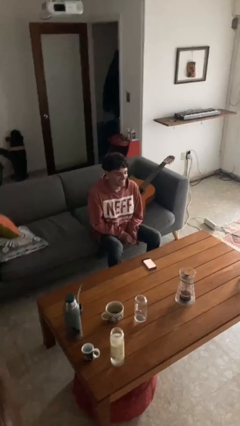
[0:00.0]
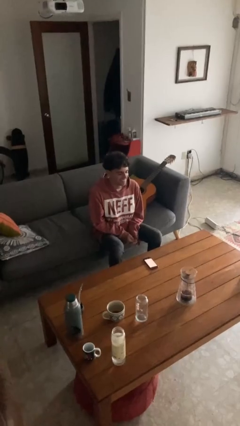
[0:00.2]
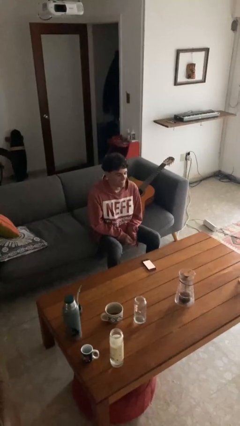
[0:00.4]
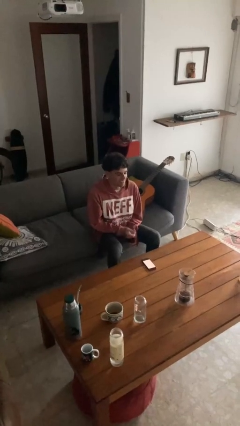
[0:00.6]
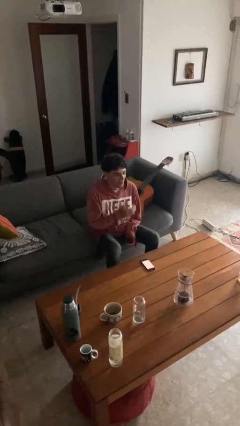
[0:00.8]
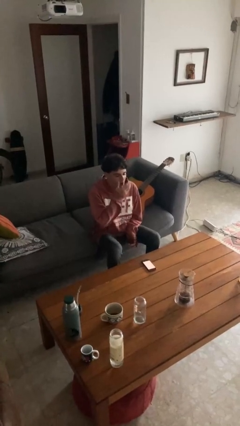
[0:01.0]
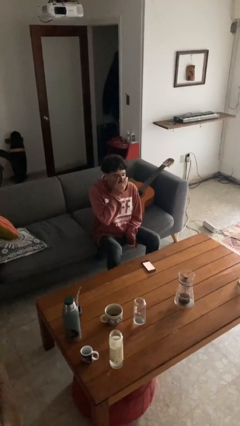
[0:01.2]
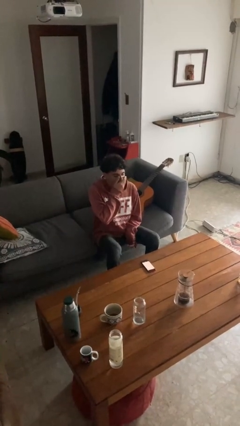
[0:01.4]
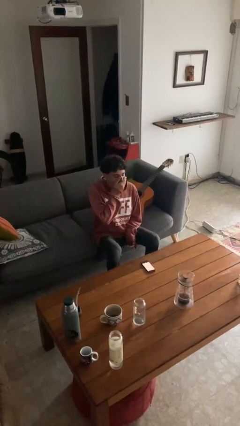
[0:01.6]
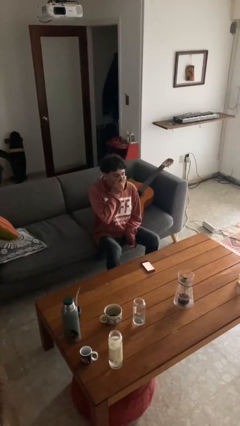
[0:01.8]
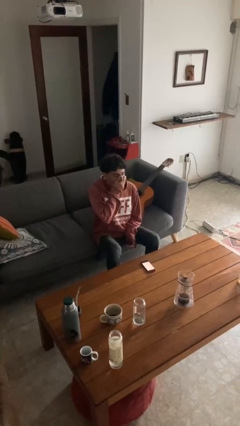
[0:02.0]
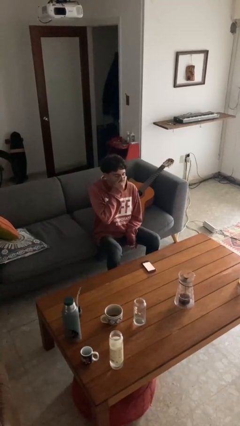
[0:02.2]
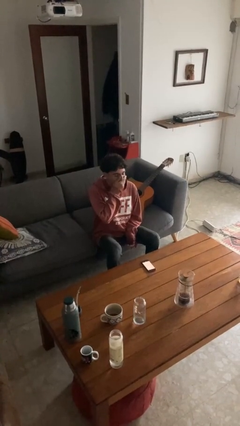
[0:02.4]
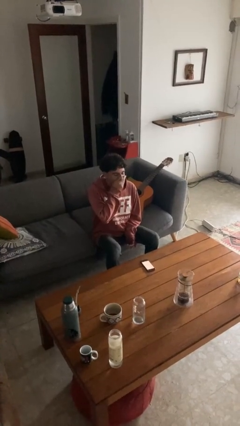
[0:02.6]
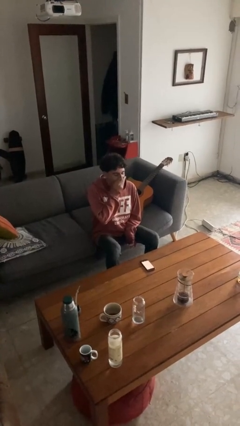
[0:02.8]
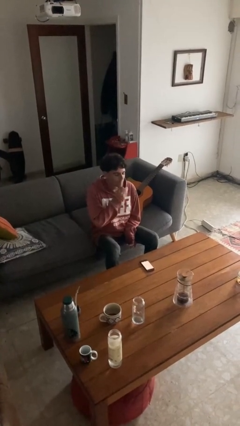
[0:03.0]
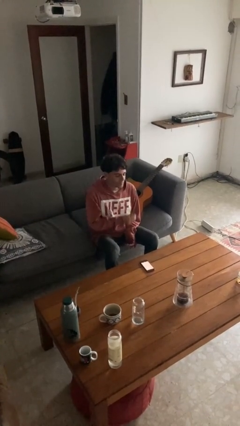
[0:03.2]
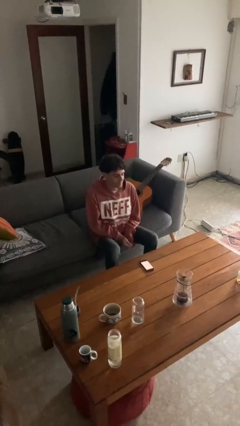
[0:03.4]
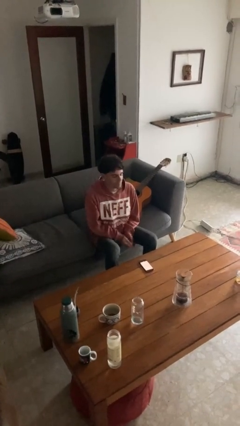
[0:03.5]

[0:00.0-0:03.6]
person yawns

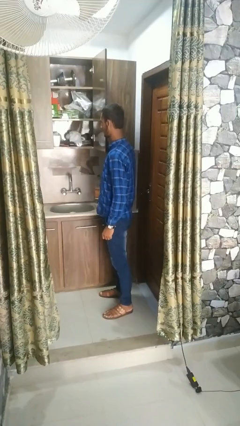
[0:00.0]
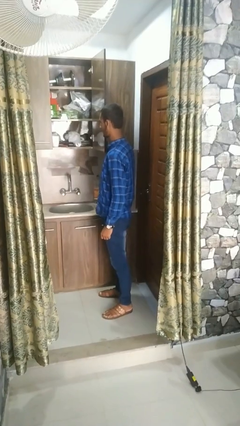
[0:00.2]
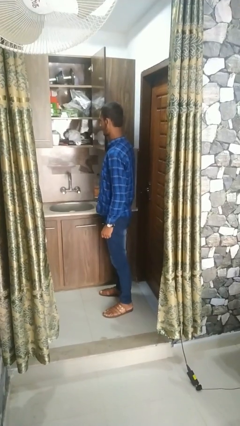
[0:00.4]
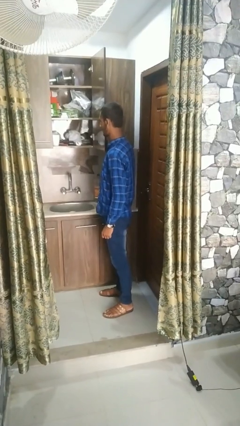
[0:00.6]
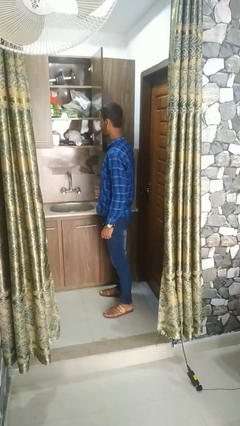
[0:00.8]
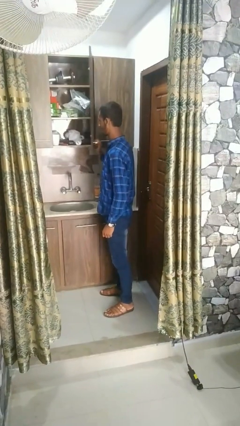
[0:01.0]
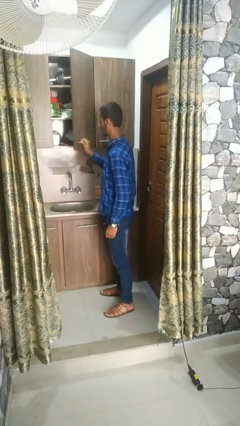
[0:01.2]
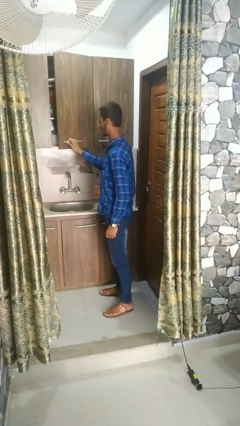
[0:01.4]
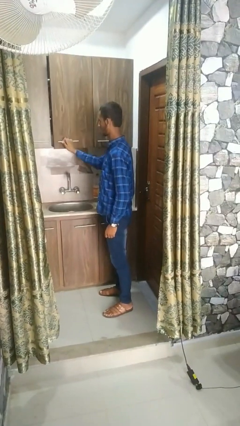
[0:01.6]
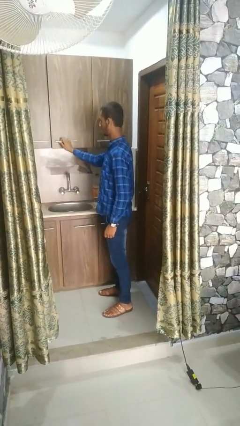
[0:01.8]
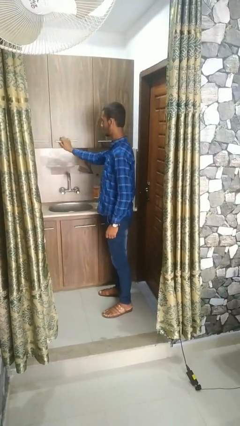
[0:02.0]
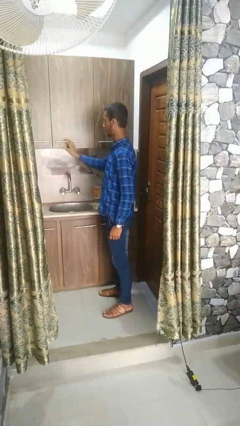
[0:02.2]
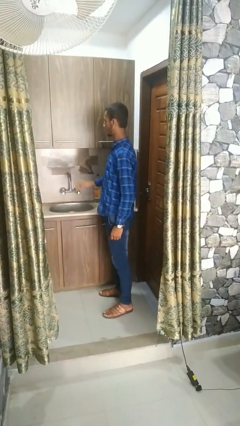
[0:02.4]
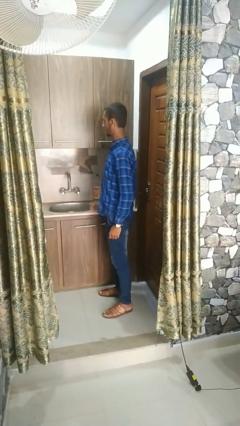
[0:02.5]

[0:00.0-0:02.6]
person closes cabinet

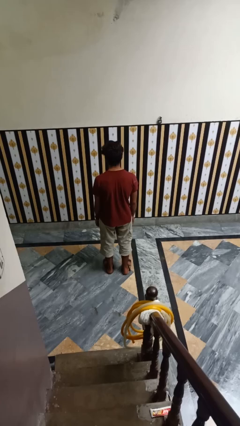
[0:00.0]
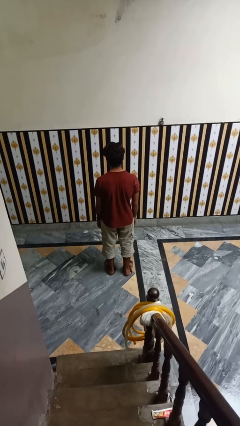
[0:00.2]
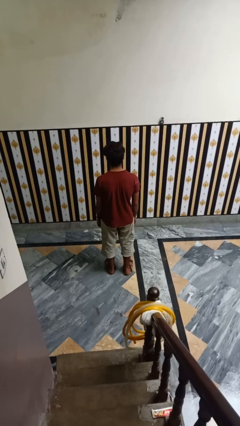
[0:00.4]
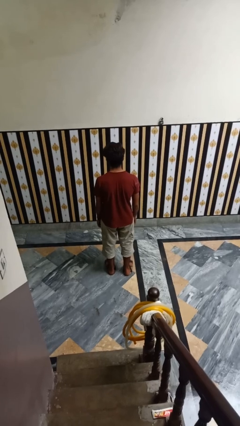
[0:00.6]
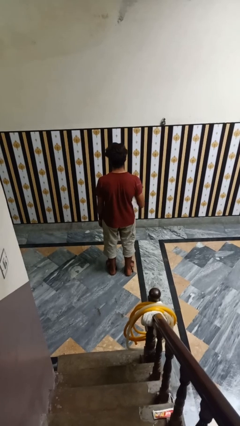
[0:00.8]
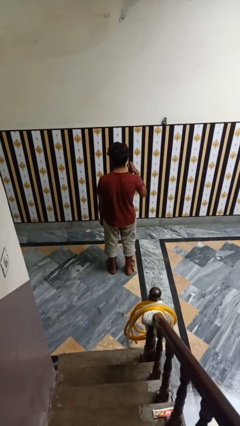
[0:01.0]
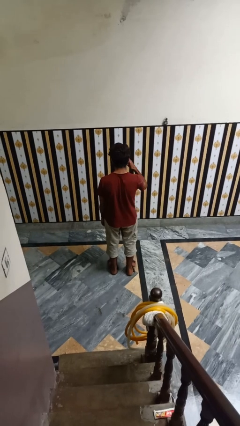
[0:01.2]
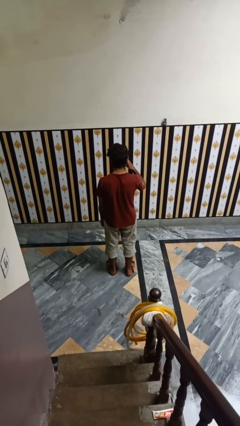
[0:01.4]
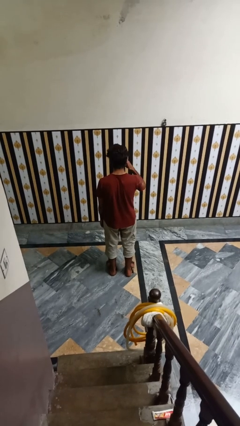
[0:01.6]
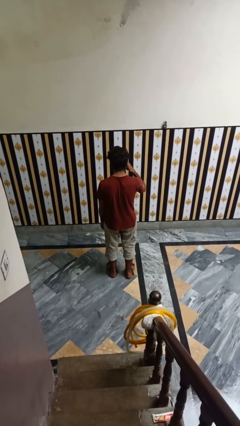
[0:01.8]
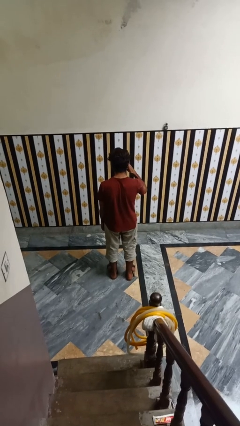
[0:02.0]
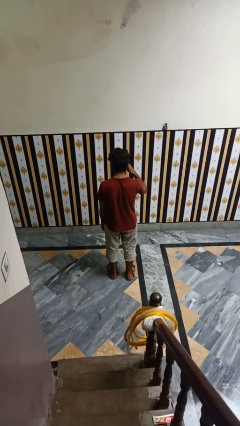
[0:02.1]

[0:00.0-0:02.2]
person gestures call me

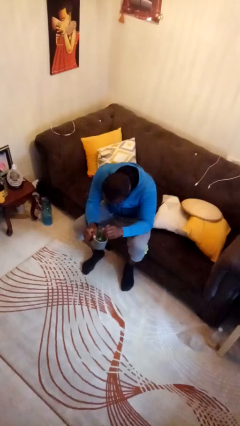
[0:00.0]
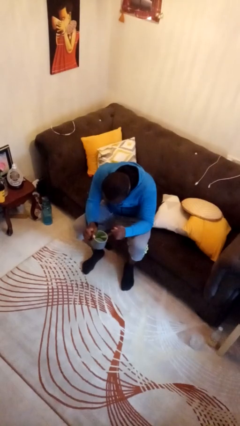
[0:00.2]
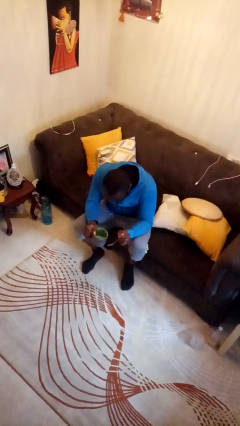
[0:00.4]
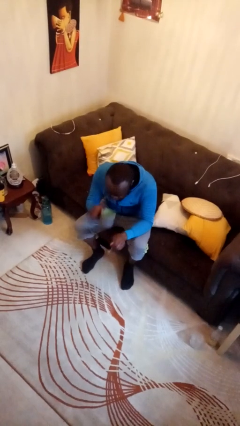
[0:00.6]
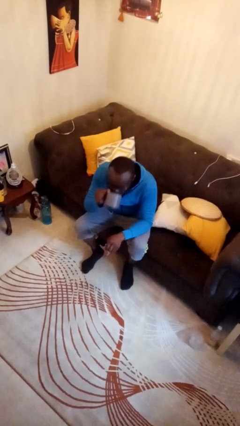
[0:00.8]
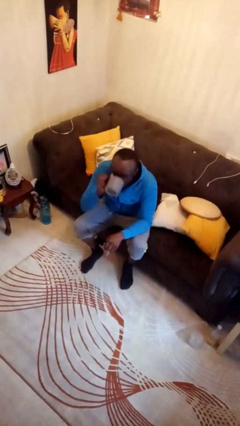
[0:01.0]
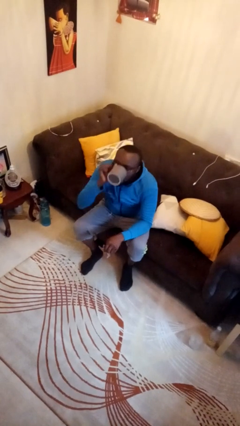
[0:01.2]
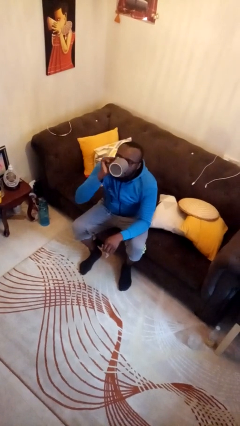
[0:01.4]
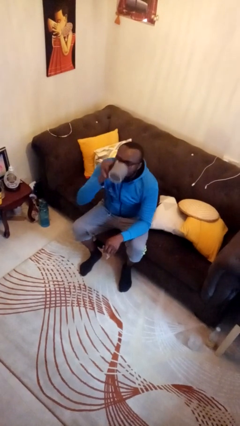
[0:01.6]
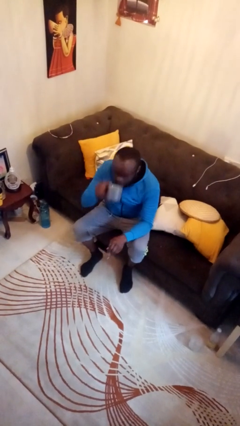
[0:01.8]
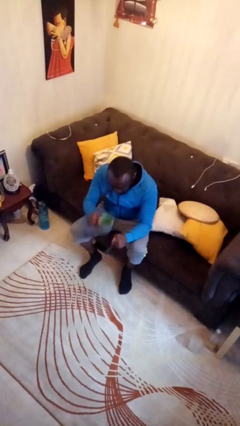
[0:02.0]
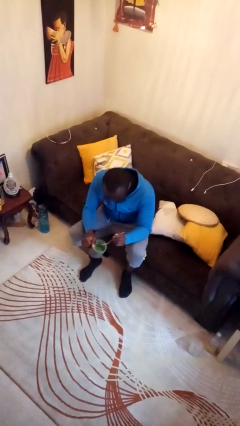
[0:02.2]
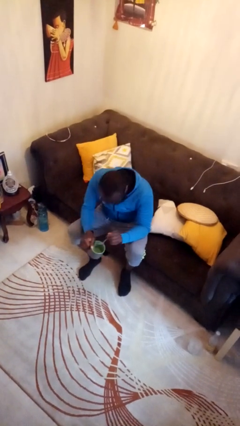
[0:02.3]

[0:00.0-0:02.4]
person drinks from mug

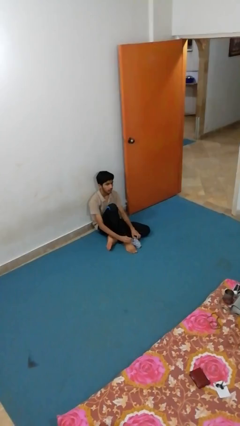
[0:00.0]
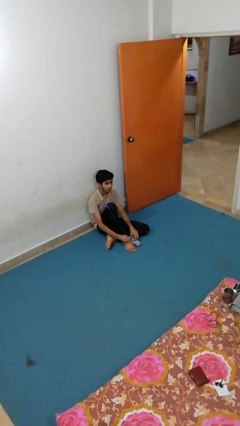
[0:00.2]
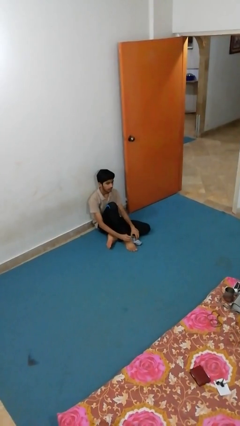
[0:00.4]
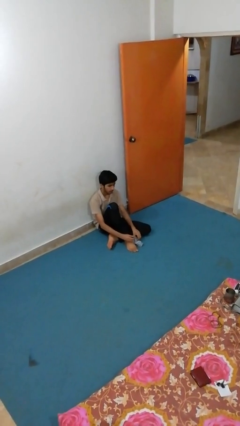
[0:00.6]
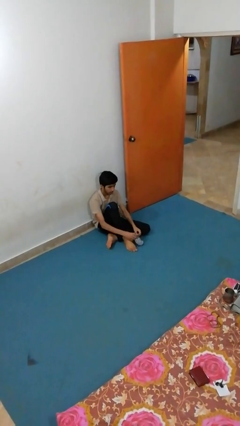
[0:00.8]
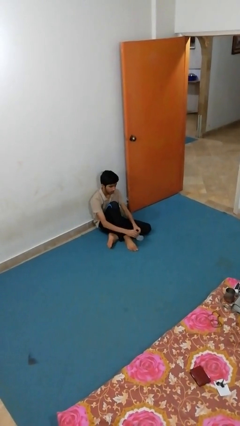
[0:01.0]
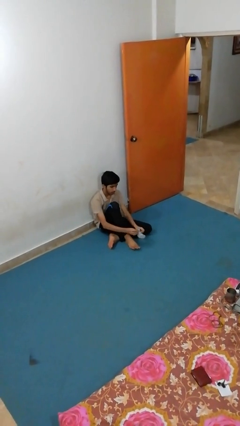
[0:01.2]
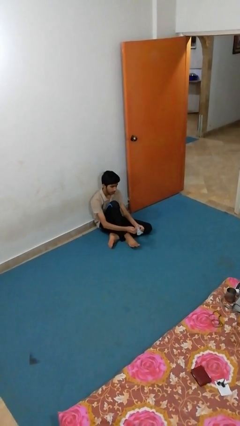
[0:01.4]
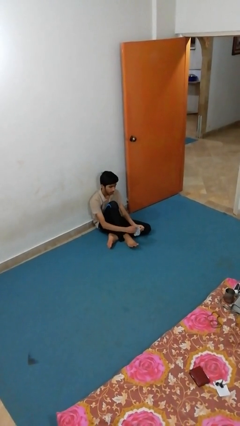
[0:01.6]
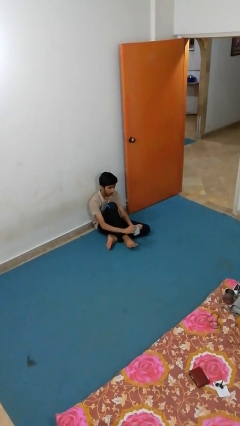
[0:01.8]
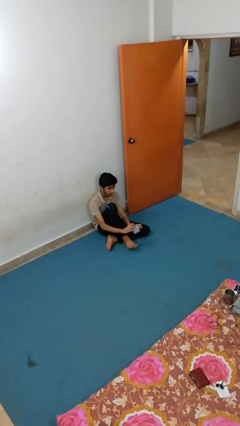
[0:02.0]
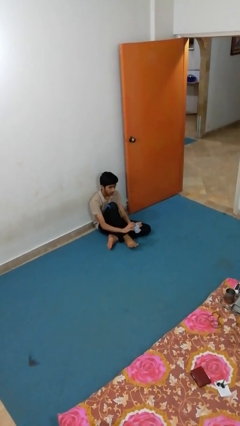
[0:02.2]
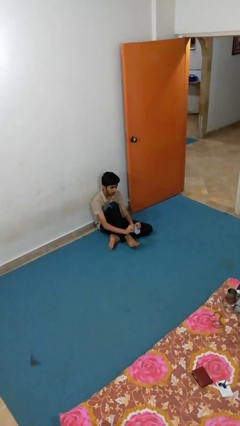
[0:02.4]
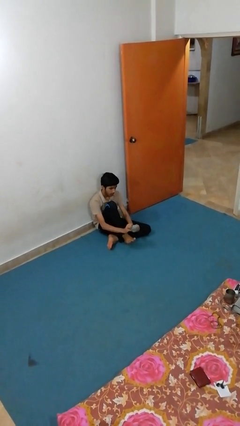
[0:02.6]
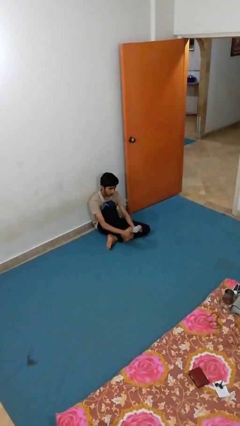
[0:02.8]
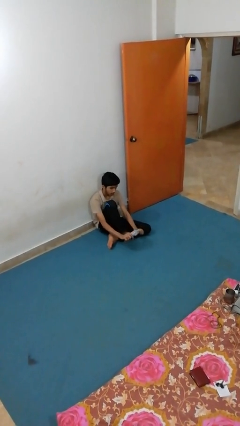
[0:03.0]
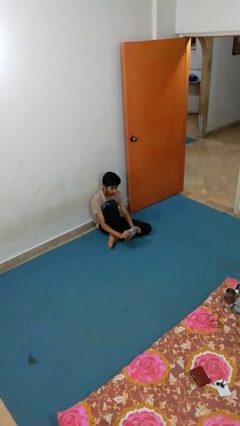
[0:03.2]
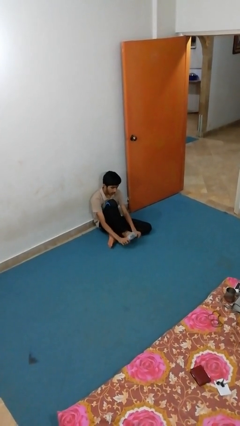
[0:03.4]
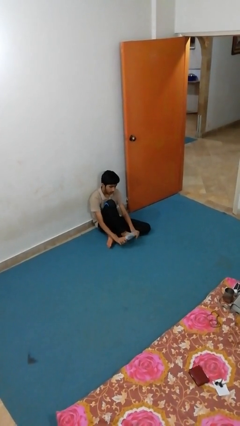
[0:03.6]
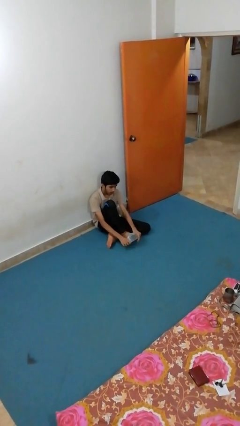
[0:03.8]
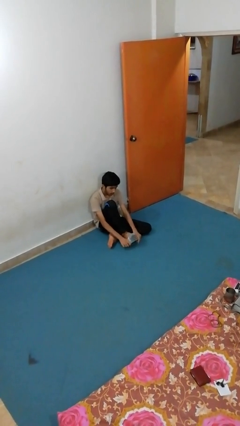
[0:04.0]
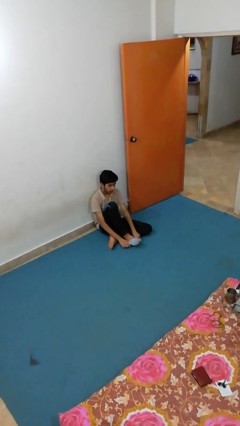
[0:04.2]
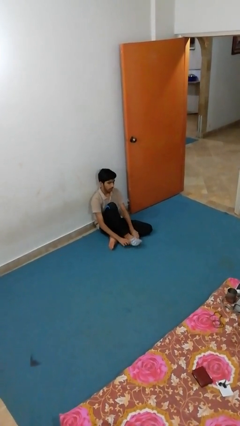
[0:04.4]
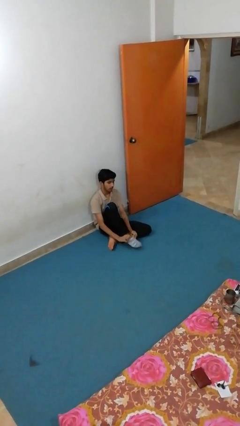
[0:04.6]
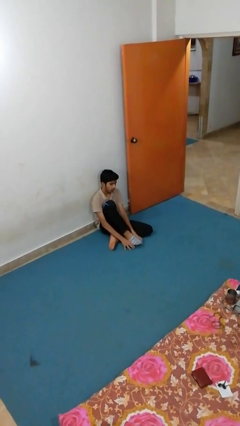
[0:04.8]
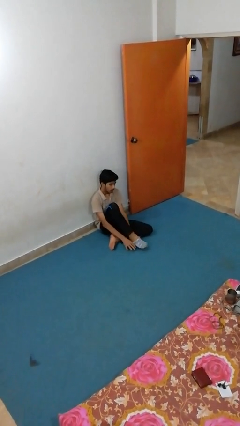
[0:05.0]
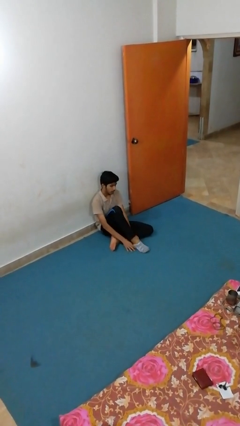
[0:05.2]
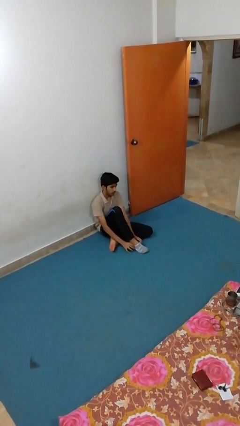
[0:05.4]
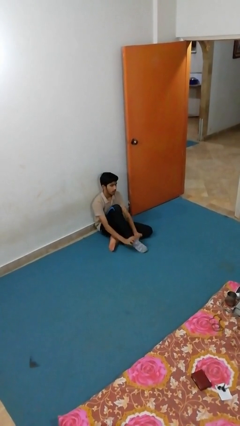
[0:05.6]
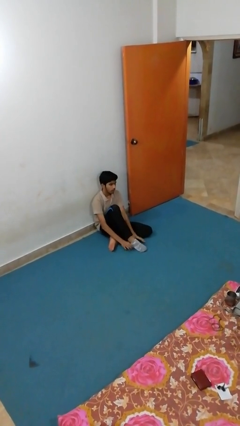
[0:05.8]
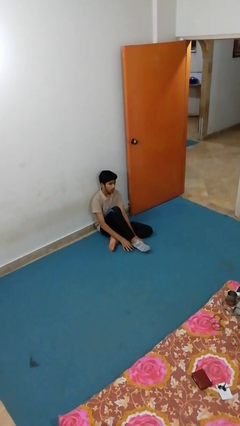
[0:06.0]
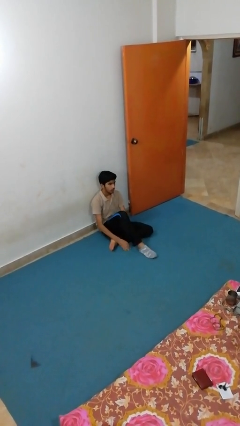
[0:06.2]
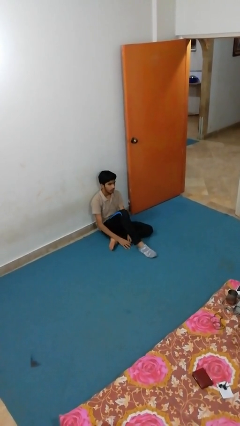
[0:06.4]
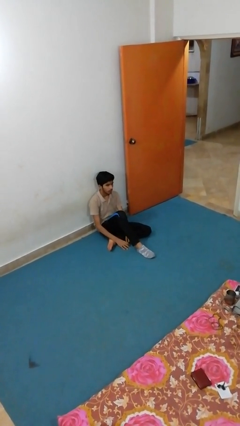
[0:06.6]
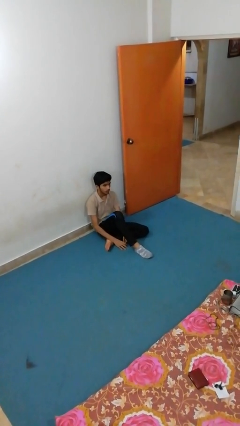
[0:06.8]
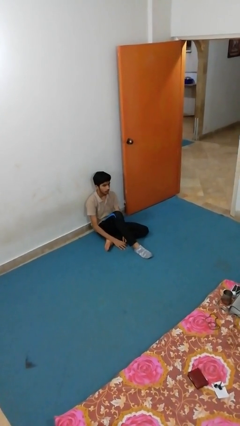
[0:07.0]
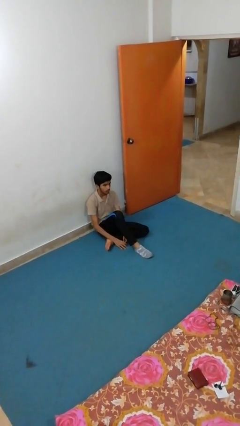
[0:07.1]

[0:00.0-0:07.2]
person puts on socks
